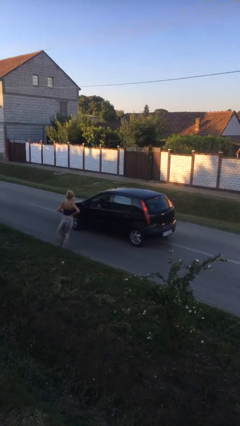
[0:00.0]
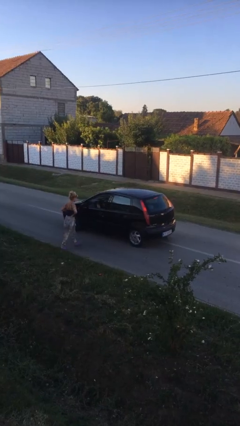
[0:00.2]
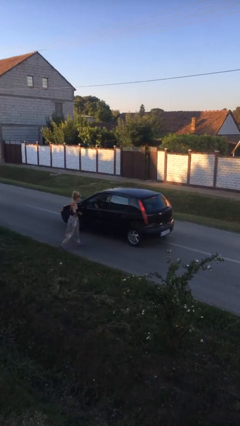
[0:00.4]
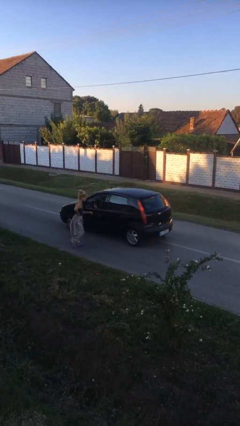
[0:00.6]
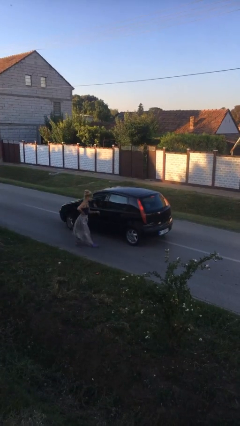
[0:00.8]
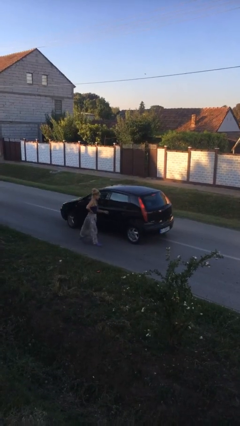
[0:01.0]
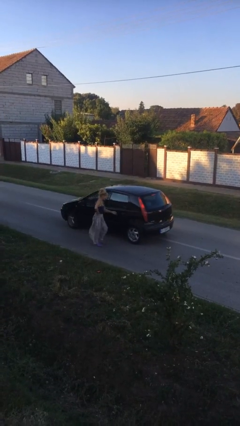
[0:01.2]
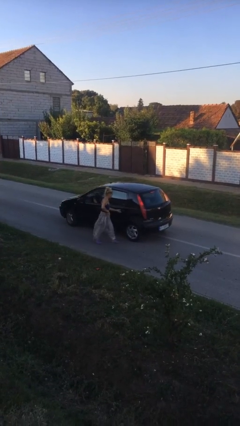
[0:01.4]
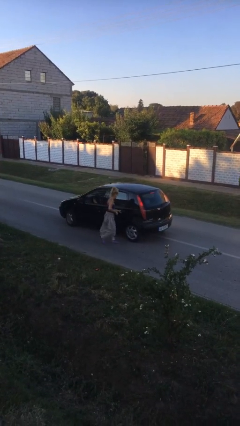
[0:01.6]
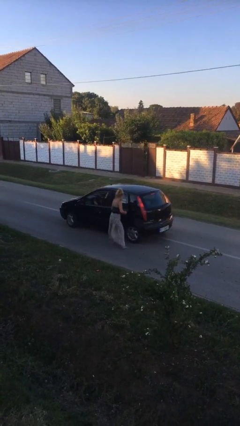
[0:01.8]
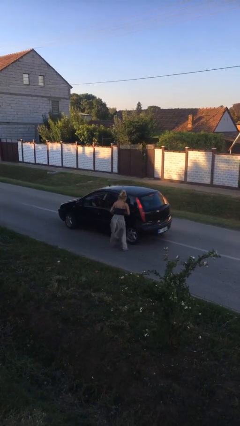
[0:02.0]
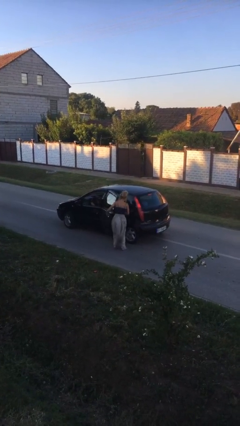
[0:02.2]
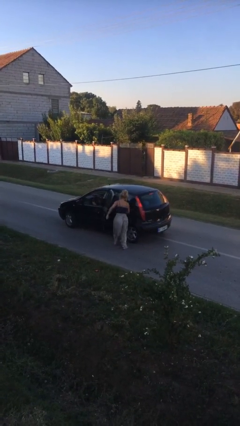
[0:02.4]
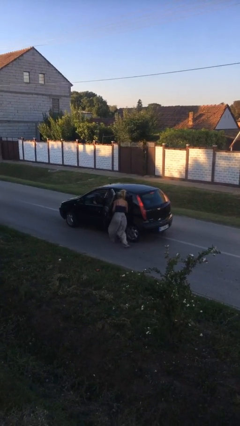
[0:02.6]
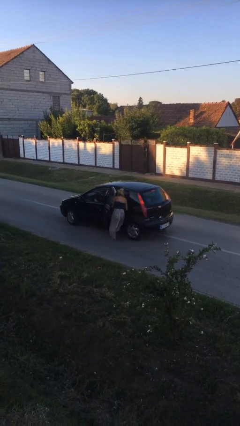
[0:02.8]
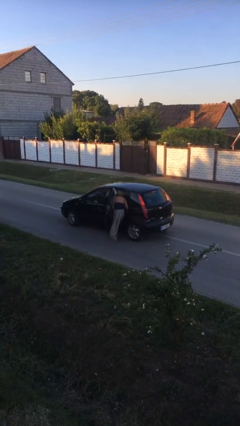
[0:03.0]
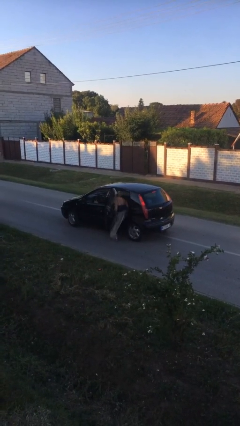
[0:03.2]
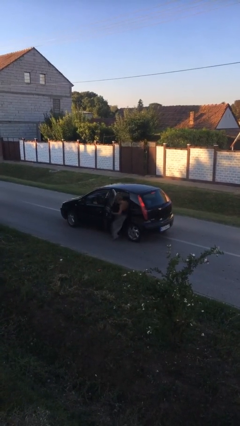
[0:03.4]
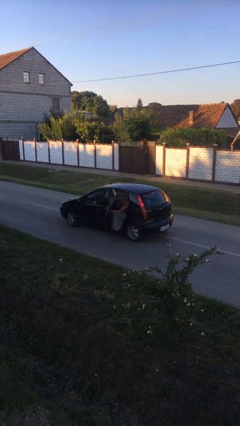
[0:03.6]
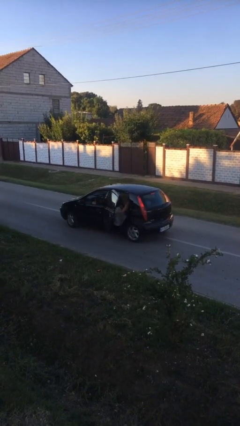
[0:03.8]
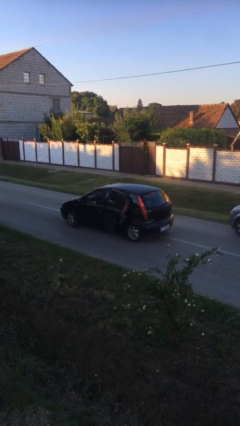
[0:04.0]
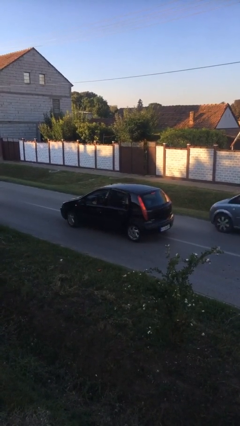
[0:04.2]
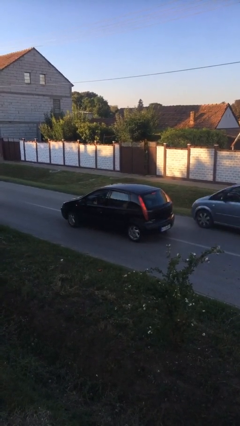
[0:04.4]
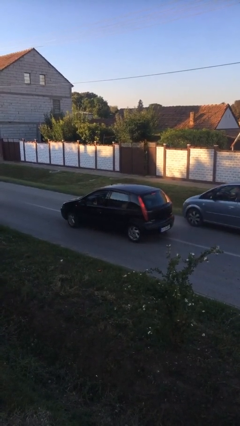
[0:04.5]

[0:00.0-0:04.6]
car picks up person

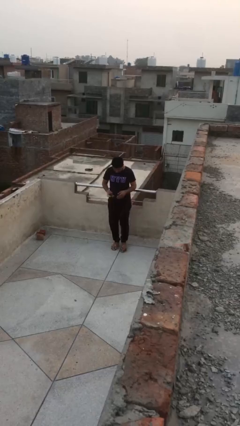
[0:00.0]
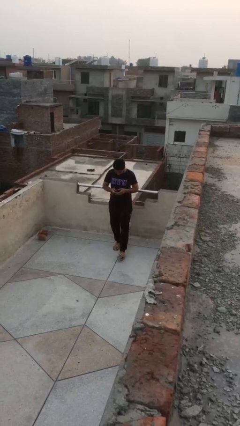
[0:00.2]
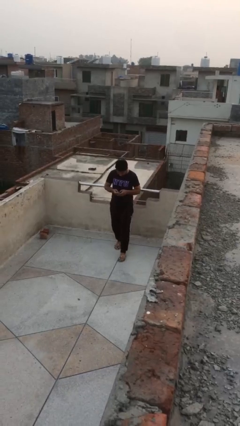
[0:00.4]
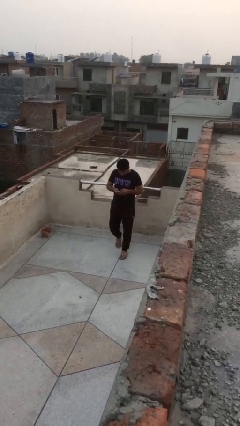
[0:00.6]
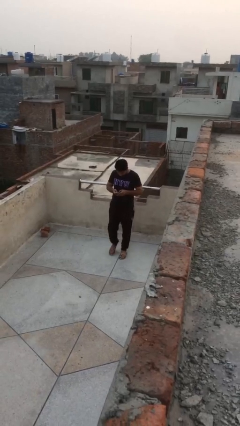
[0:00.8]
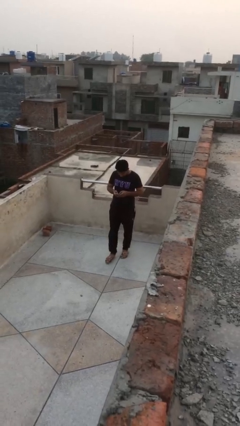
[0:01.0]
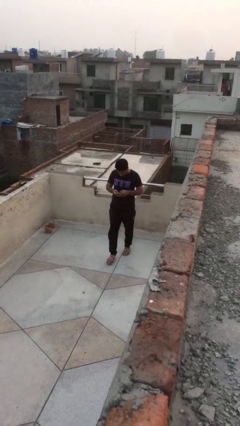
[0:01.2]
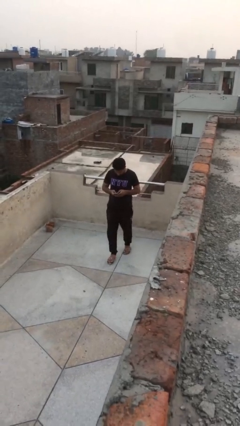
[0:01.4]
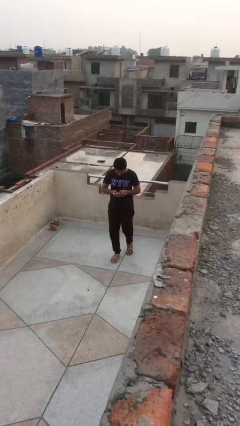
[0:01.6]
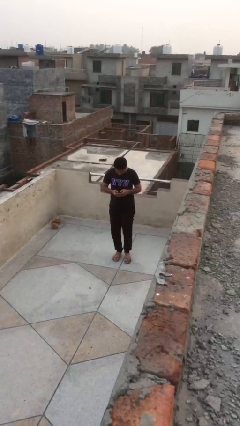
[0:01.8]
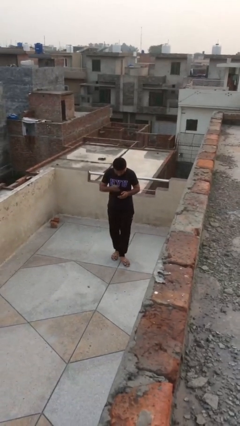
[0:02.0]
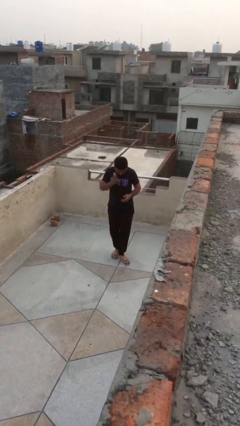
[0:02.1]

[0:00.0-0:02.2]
person texts on phone

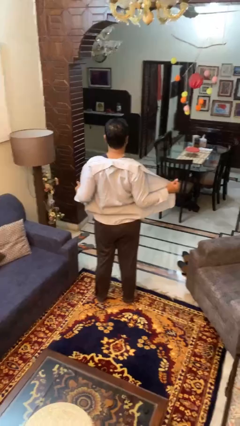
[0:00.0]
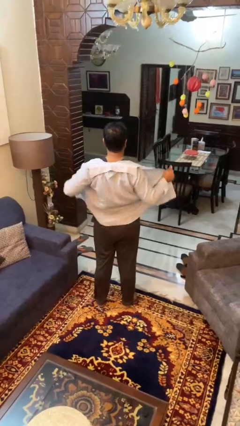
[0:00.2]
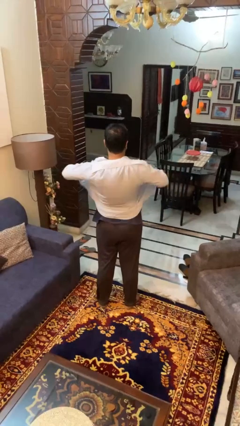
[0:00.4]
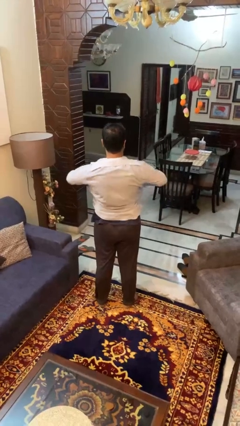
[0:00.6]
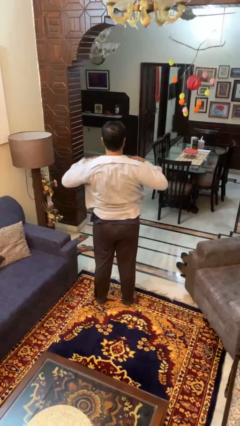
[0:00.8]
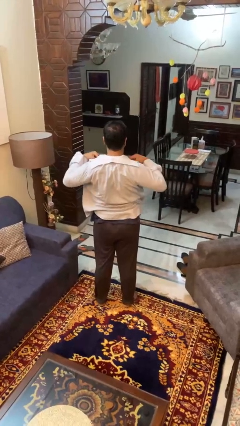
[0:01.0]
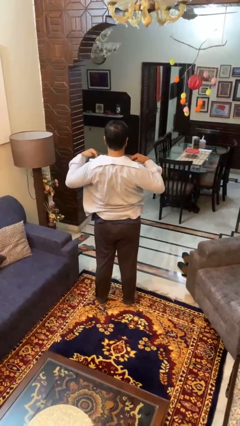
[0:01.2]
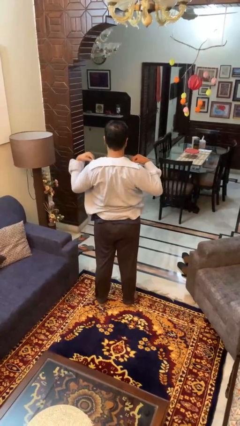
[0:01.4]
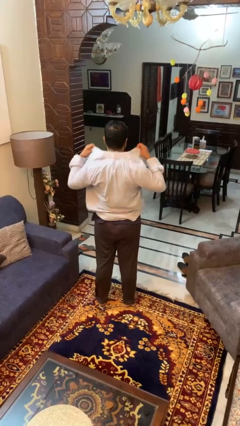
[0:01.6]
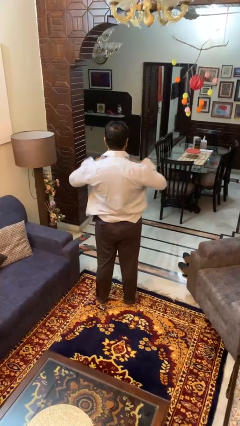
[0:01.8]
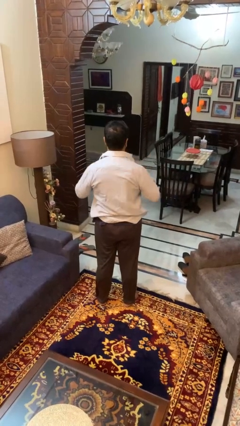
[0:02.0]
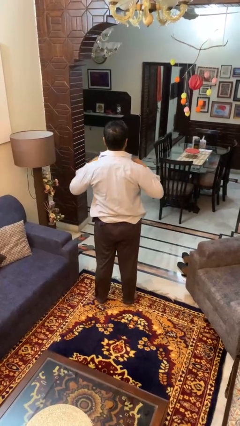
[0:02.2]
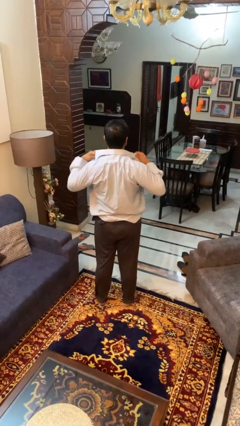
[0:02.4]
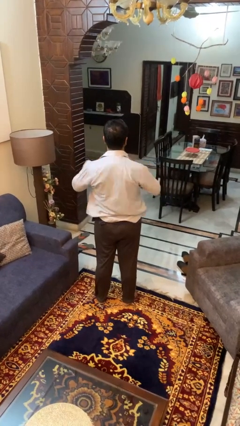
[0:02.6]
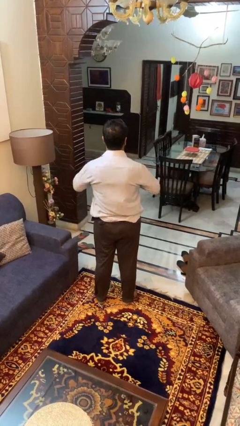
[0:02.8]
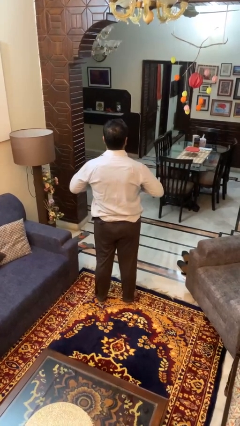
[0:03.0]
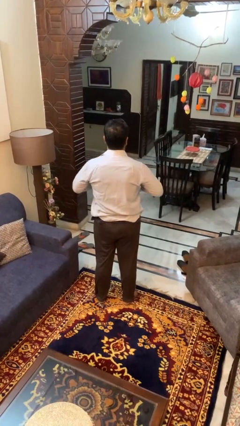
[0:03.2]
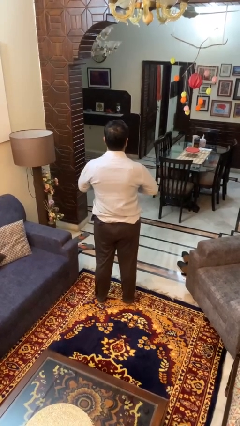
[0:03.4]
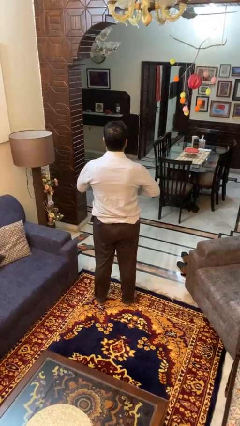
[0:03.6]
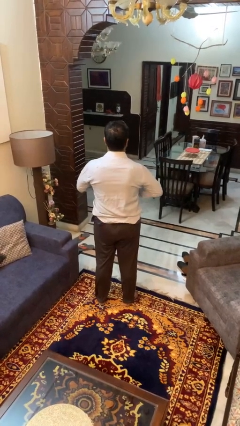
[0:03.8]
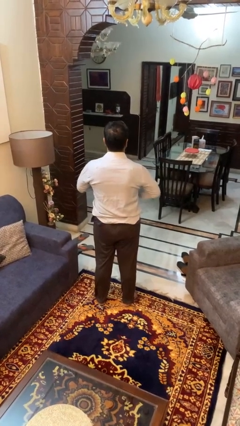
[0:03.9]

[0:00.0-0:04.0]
person buttons shirt

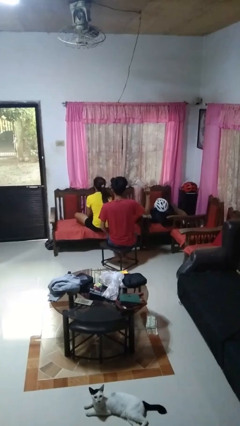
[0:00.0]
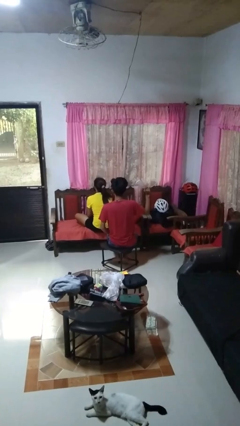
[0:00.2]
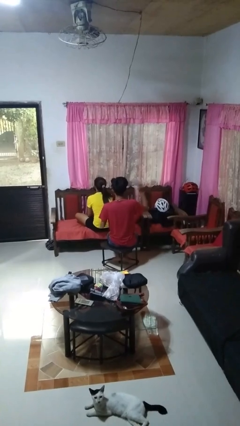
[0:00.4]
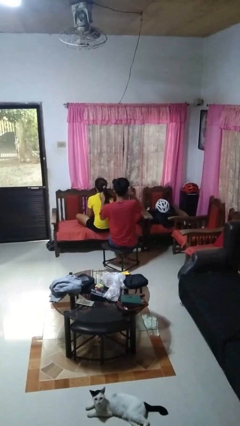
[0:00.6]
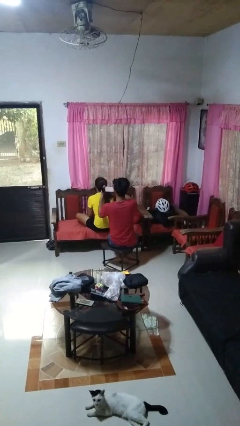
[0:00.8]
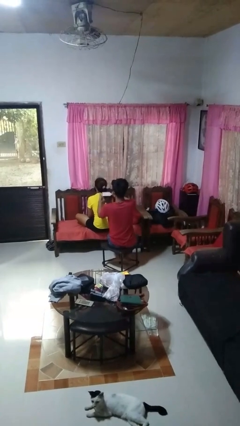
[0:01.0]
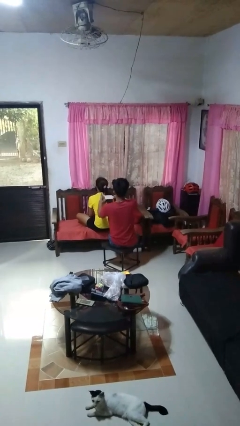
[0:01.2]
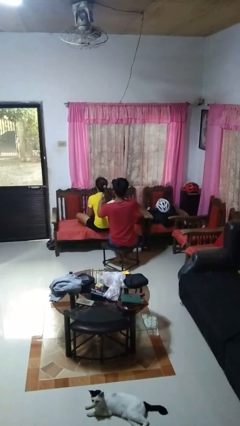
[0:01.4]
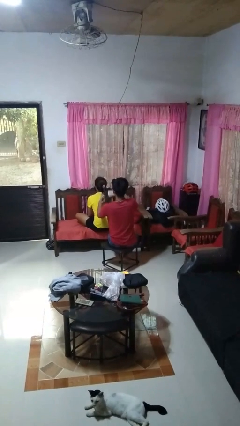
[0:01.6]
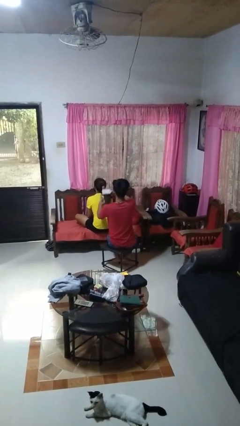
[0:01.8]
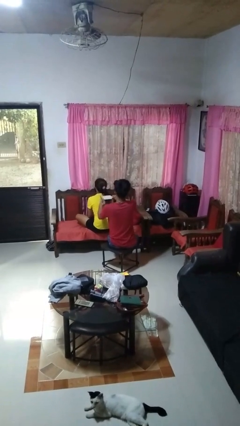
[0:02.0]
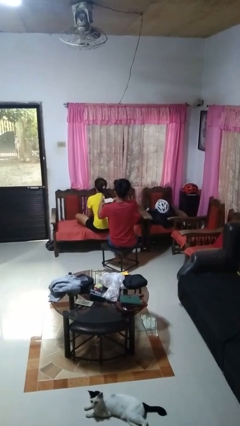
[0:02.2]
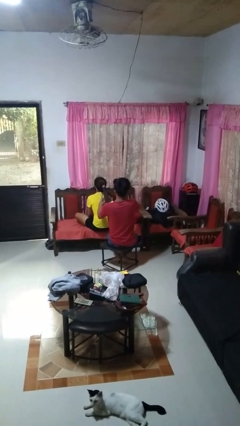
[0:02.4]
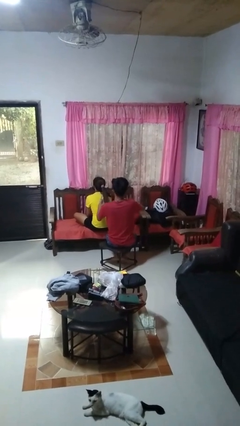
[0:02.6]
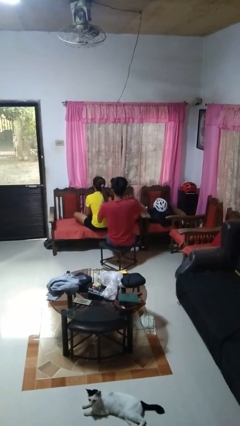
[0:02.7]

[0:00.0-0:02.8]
person brushes hair of person

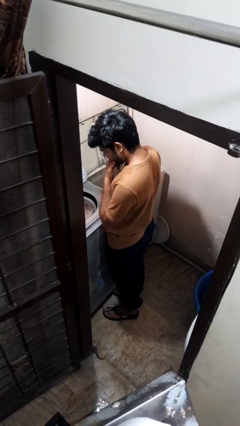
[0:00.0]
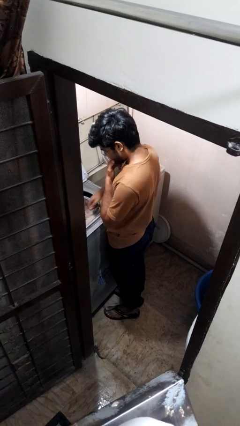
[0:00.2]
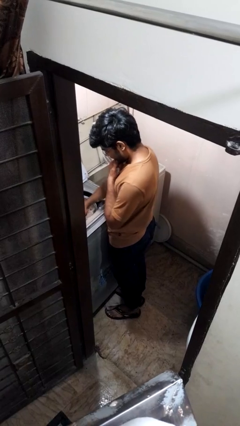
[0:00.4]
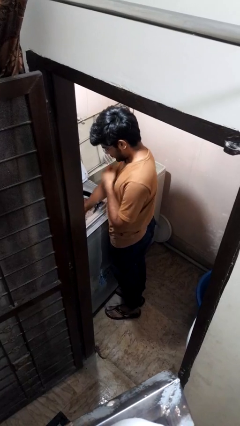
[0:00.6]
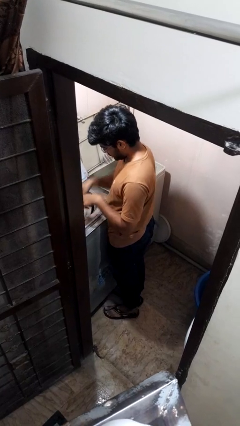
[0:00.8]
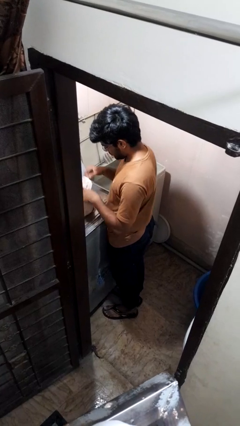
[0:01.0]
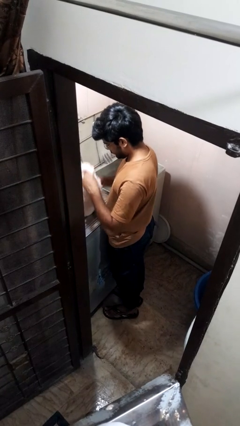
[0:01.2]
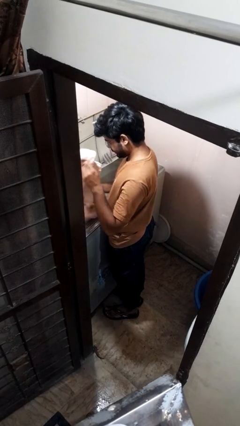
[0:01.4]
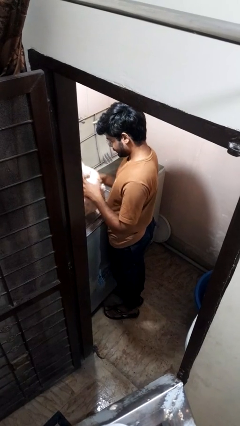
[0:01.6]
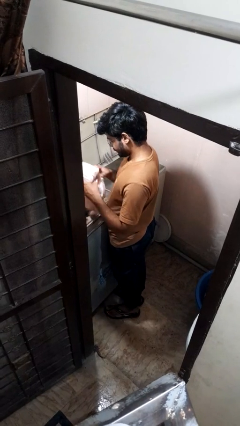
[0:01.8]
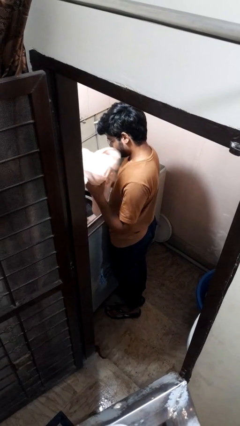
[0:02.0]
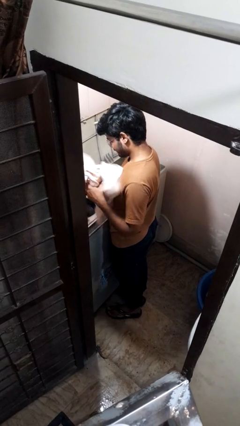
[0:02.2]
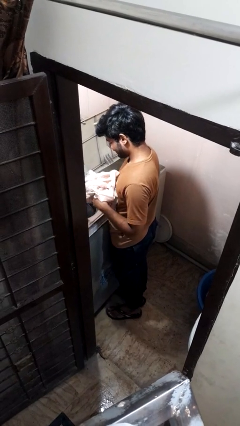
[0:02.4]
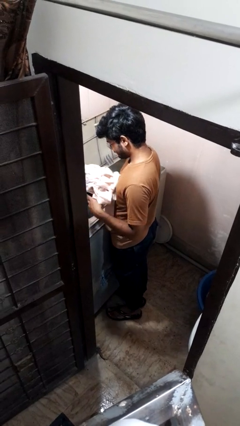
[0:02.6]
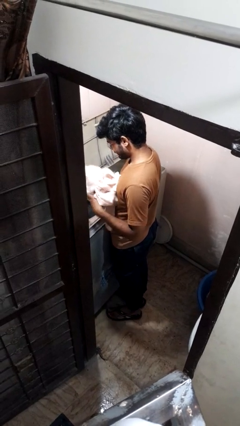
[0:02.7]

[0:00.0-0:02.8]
person unloads dryer

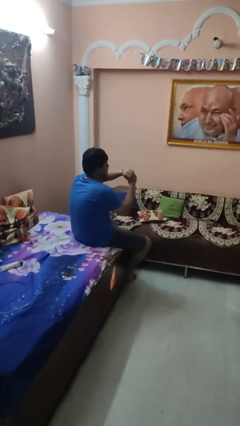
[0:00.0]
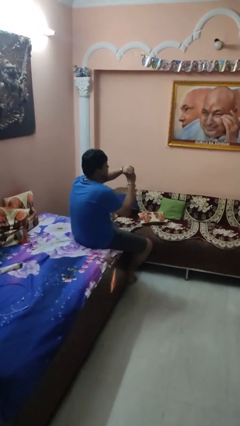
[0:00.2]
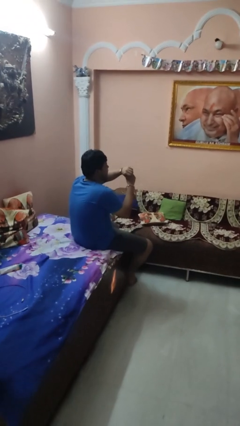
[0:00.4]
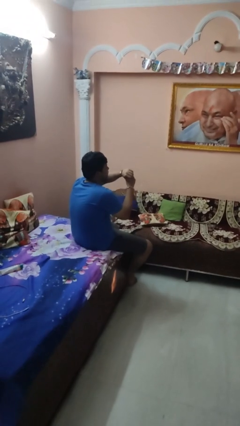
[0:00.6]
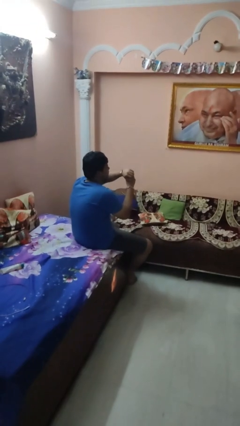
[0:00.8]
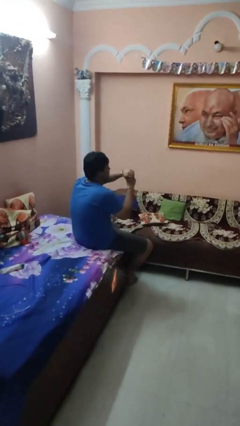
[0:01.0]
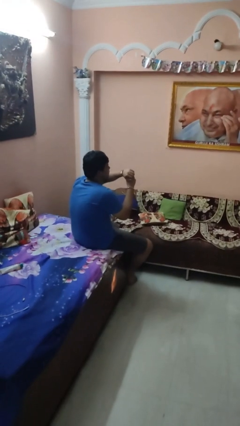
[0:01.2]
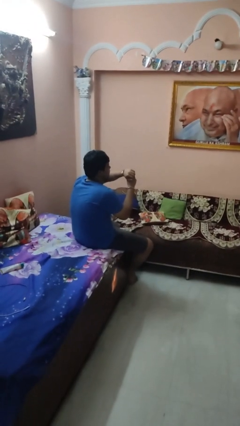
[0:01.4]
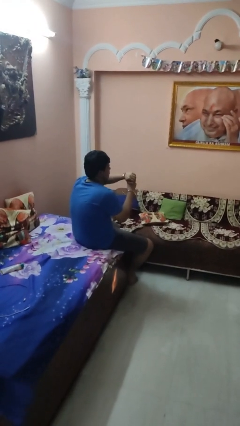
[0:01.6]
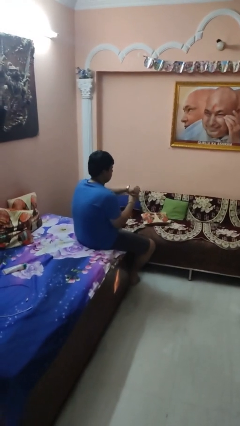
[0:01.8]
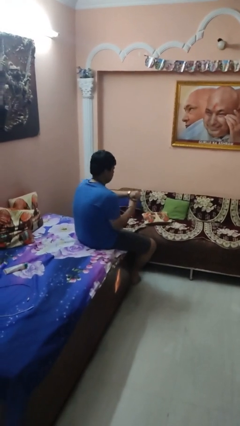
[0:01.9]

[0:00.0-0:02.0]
person looks at wristwatch
